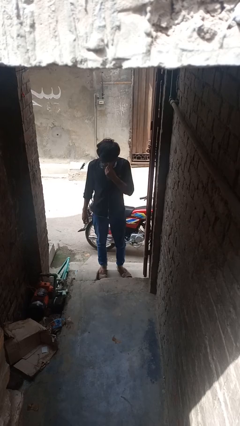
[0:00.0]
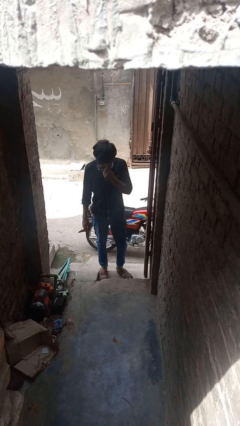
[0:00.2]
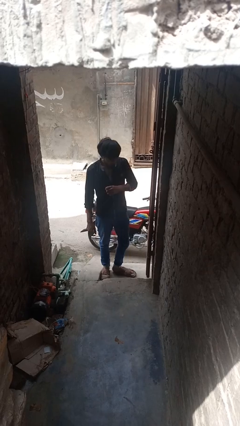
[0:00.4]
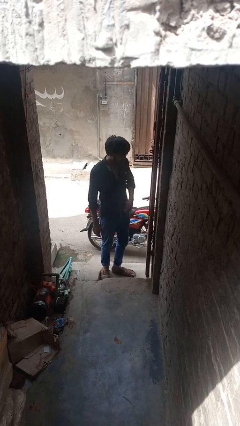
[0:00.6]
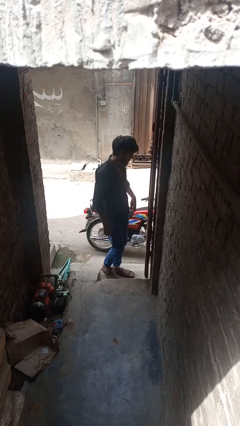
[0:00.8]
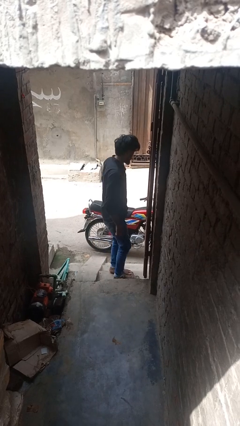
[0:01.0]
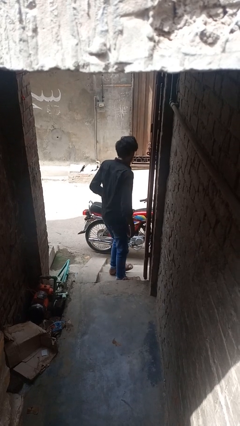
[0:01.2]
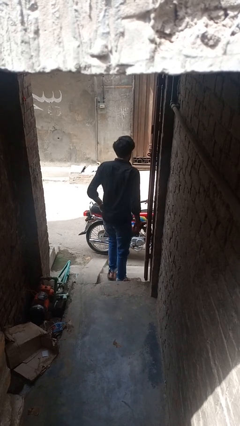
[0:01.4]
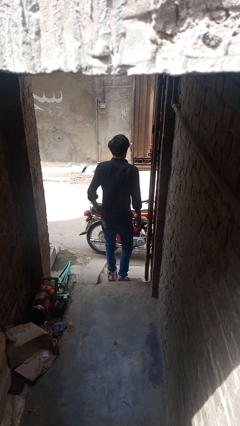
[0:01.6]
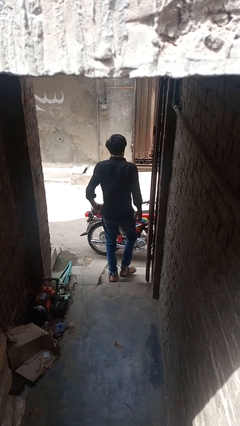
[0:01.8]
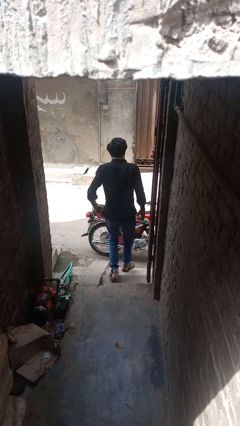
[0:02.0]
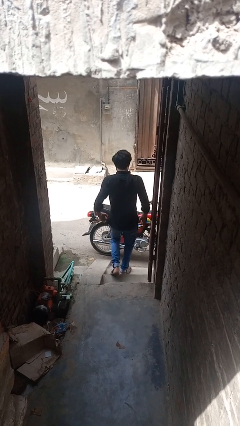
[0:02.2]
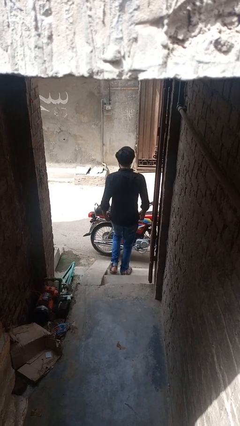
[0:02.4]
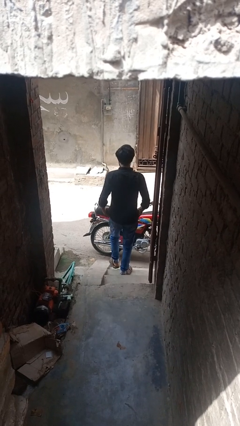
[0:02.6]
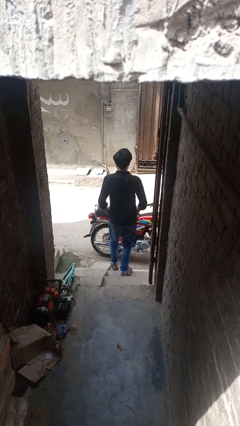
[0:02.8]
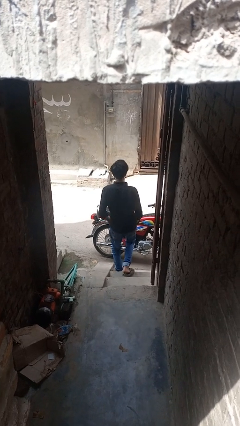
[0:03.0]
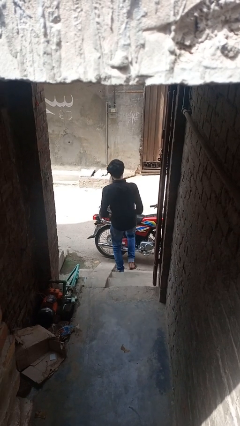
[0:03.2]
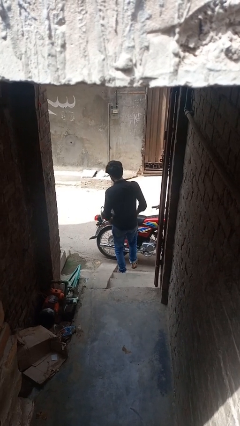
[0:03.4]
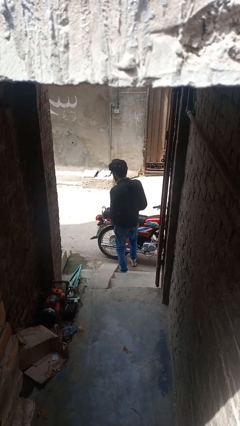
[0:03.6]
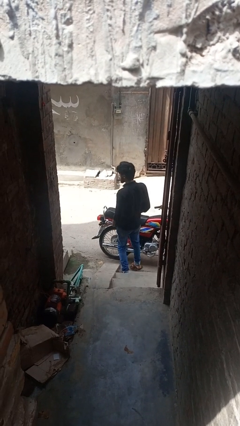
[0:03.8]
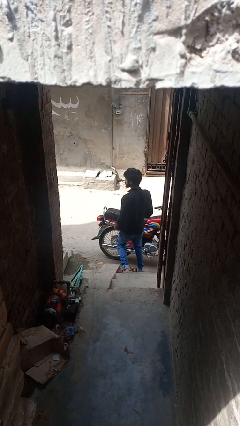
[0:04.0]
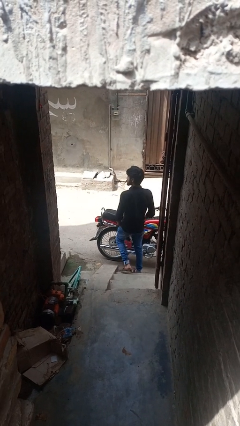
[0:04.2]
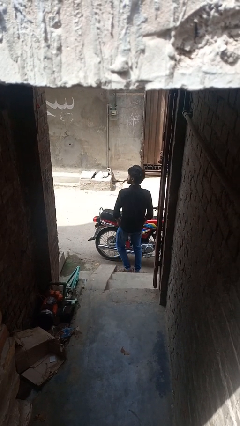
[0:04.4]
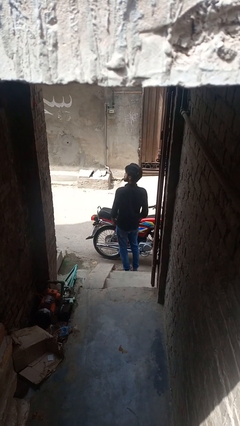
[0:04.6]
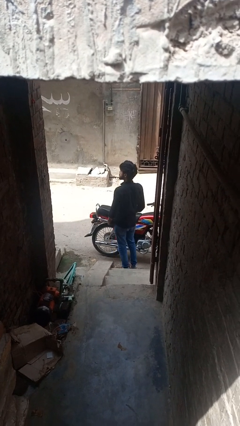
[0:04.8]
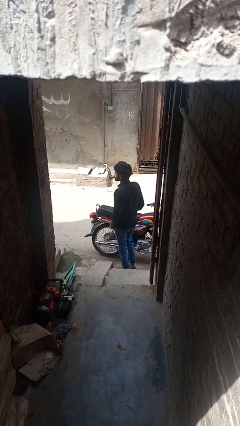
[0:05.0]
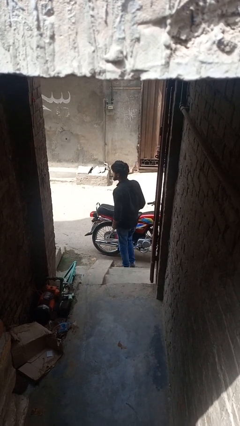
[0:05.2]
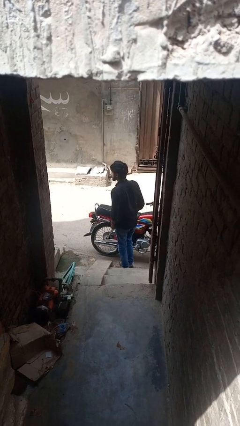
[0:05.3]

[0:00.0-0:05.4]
person climbs down stairs

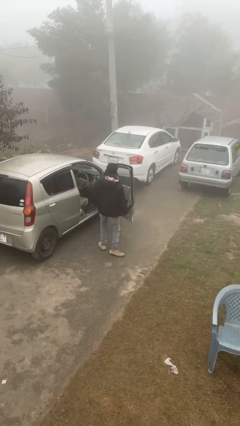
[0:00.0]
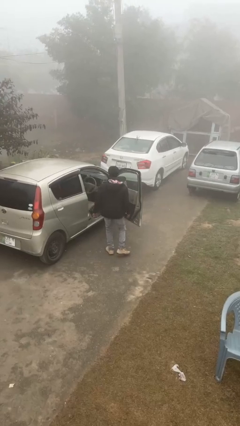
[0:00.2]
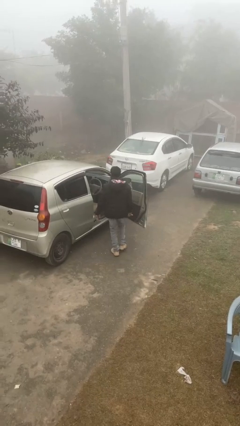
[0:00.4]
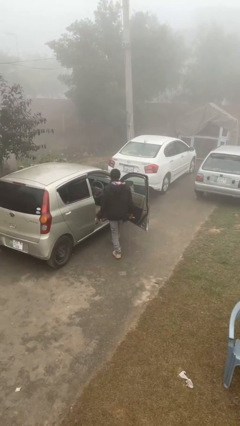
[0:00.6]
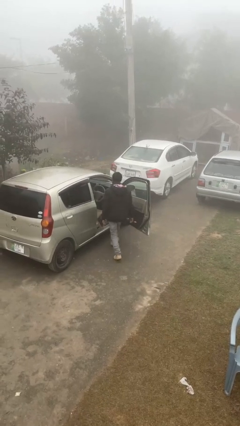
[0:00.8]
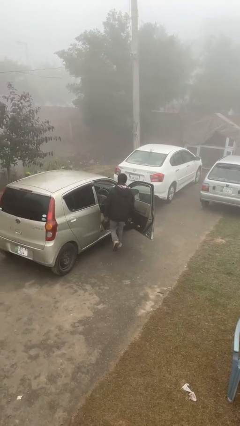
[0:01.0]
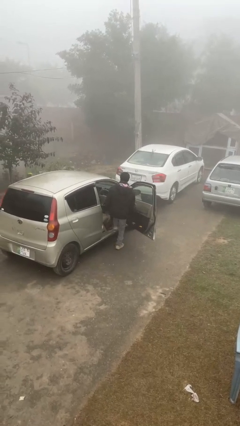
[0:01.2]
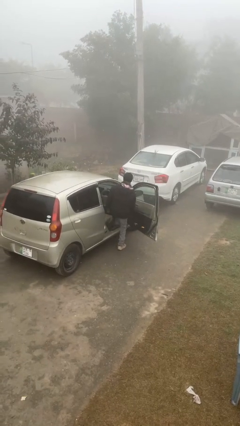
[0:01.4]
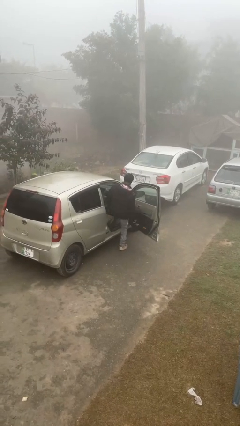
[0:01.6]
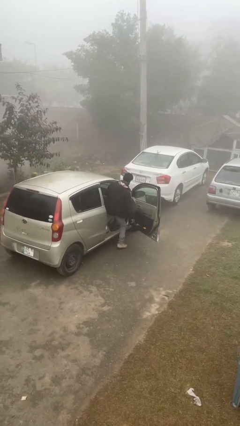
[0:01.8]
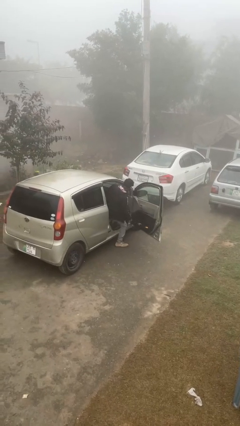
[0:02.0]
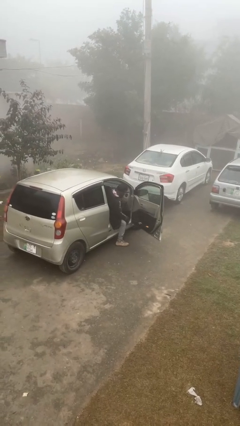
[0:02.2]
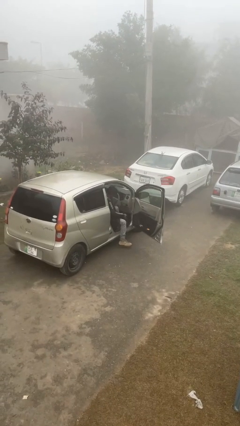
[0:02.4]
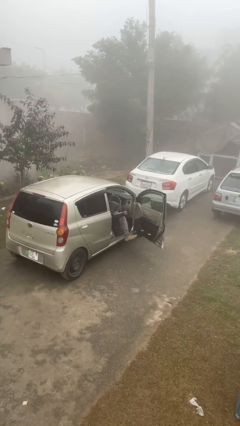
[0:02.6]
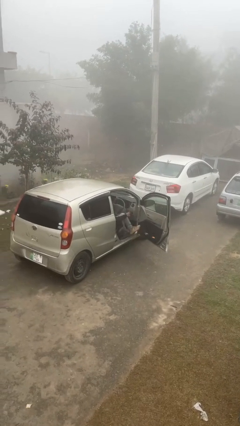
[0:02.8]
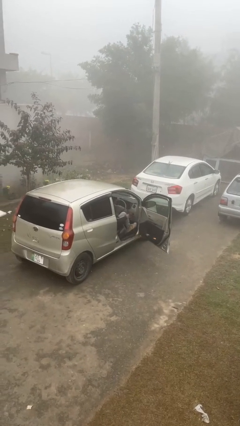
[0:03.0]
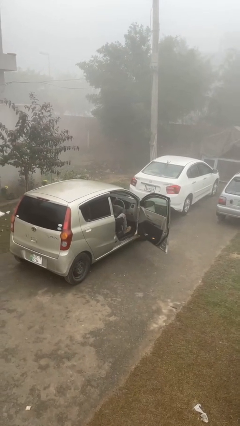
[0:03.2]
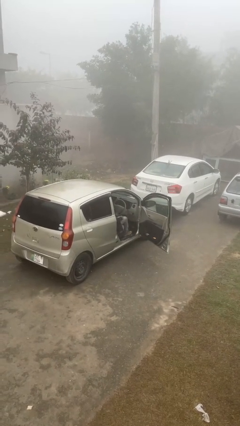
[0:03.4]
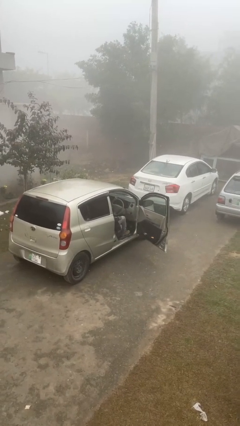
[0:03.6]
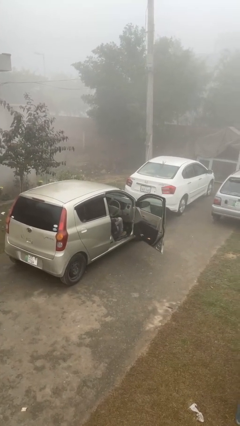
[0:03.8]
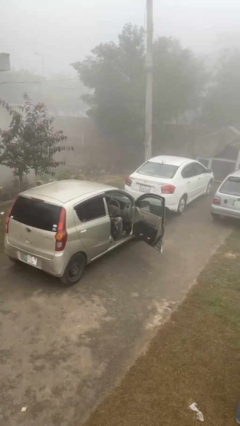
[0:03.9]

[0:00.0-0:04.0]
person enters car

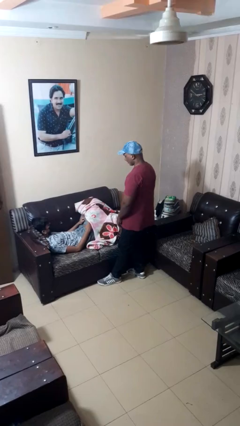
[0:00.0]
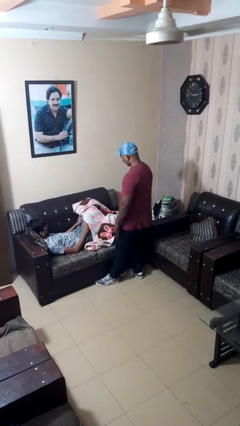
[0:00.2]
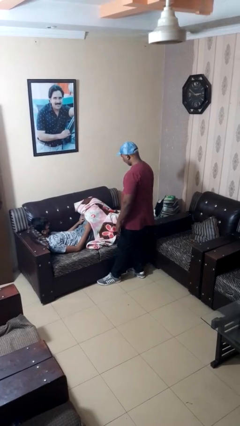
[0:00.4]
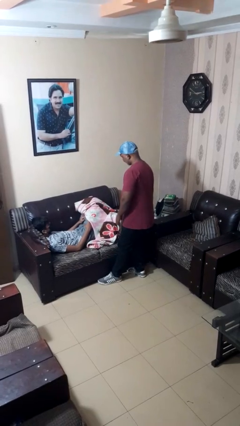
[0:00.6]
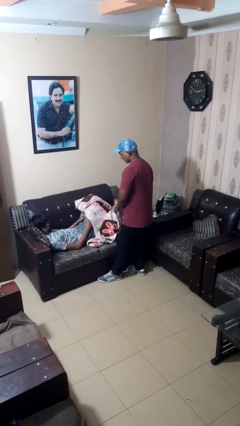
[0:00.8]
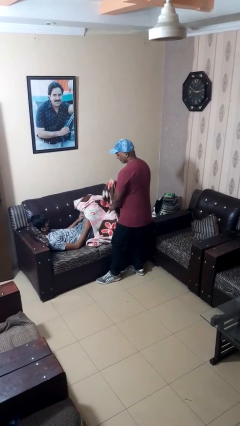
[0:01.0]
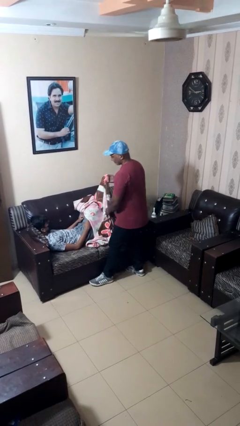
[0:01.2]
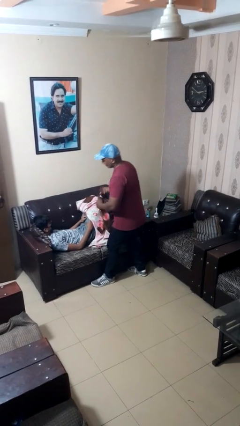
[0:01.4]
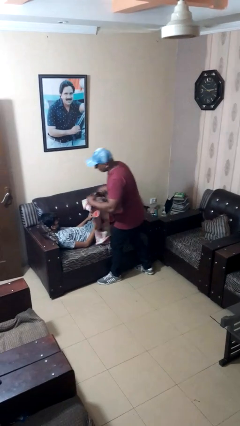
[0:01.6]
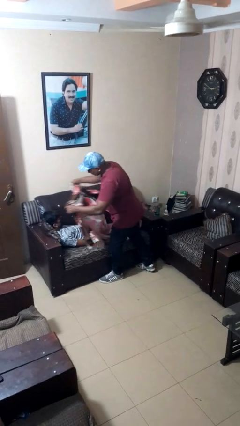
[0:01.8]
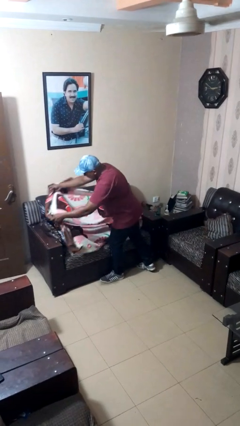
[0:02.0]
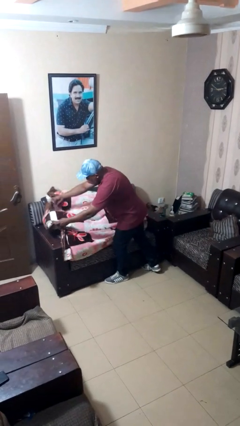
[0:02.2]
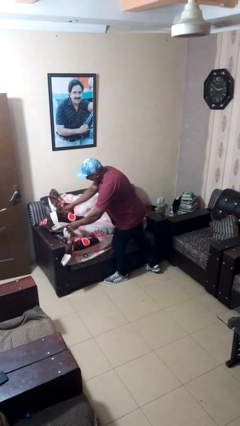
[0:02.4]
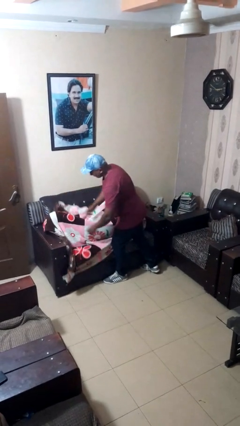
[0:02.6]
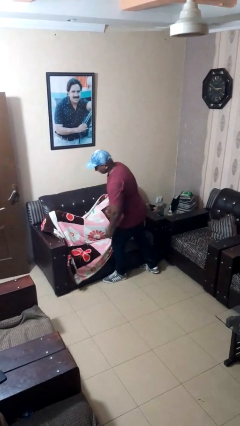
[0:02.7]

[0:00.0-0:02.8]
person covers friend with blanket

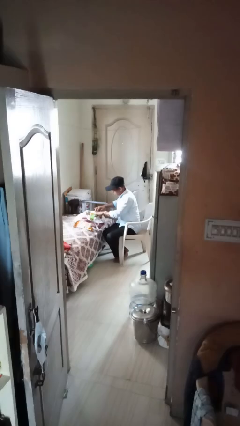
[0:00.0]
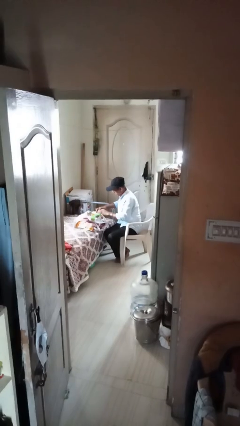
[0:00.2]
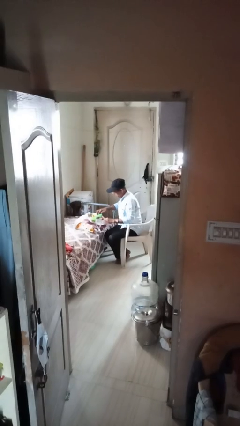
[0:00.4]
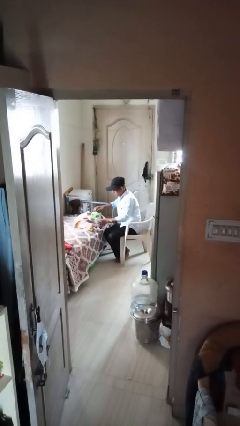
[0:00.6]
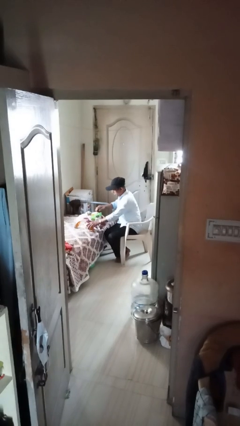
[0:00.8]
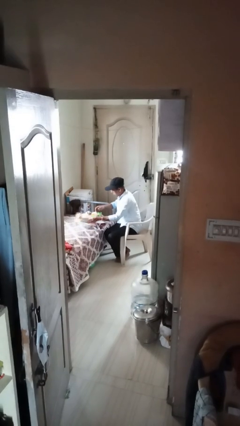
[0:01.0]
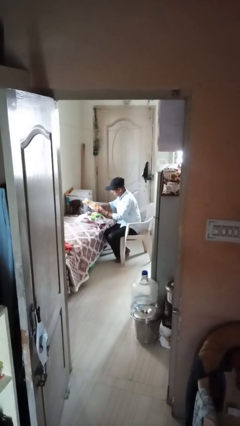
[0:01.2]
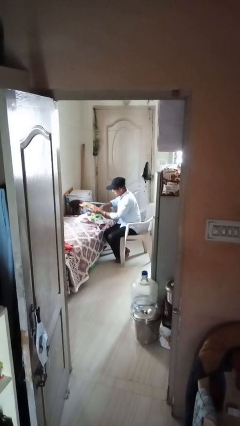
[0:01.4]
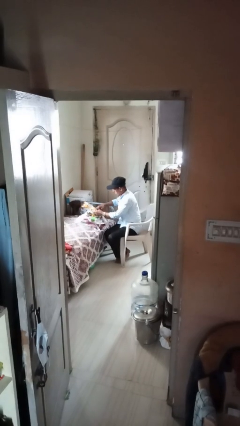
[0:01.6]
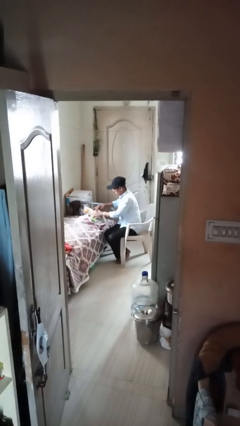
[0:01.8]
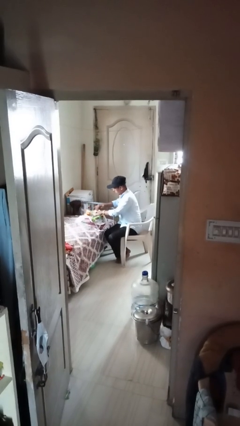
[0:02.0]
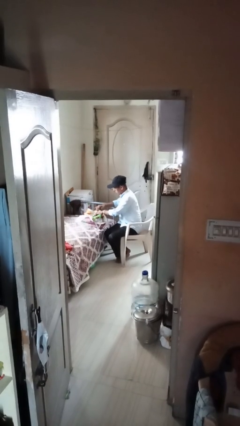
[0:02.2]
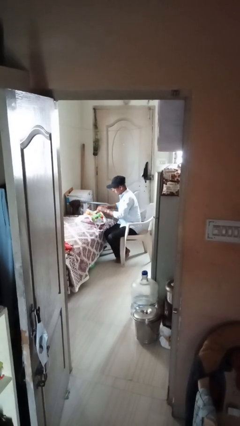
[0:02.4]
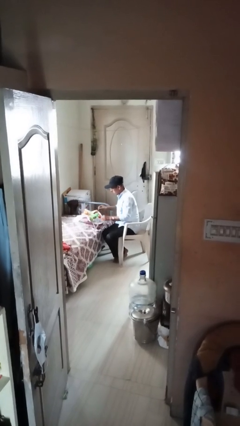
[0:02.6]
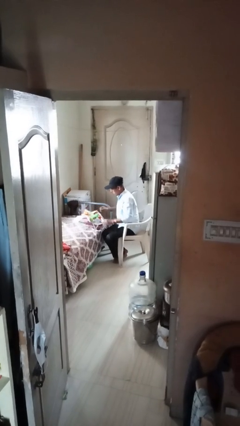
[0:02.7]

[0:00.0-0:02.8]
person puts object into bag

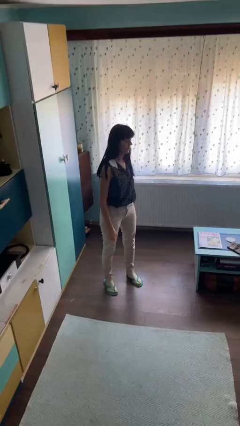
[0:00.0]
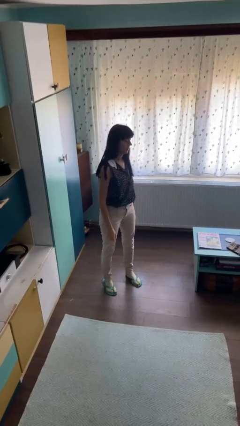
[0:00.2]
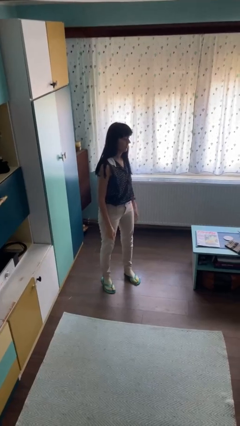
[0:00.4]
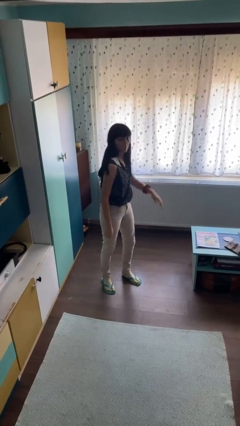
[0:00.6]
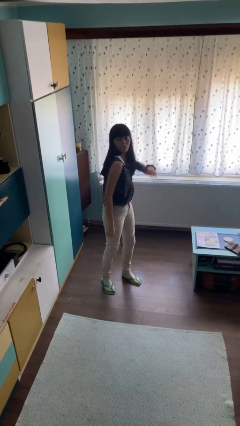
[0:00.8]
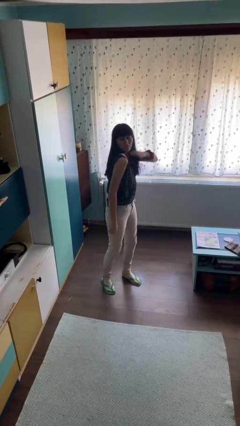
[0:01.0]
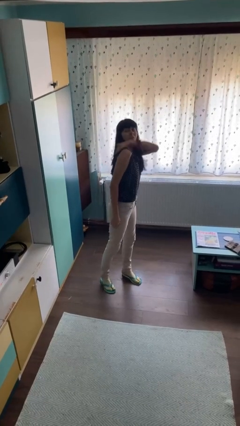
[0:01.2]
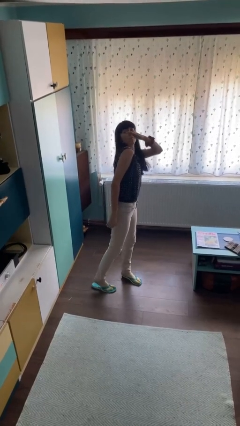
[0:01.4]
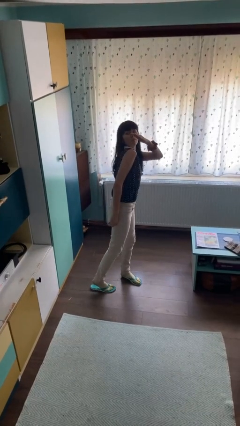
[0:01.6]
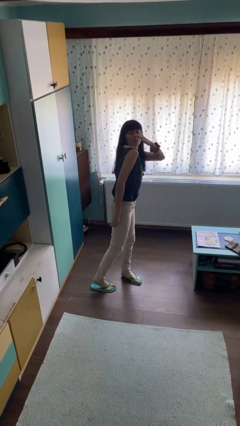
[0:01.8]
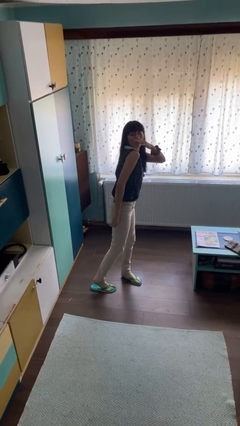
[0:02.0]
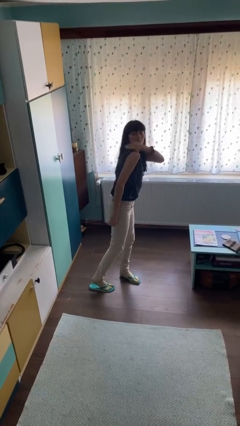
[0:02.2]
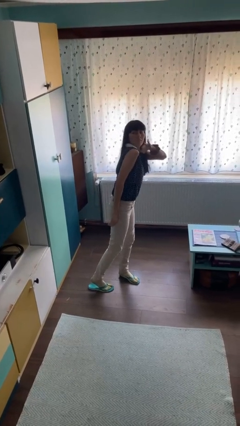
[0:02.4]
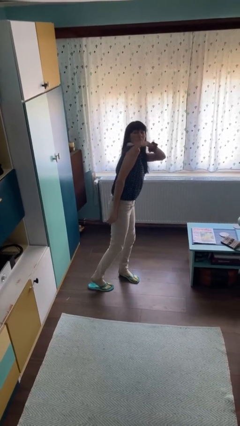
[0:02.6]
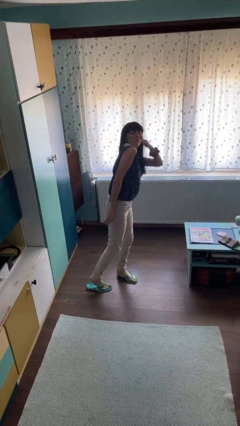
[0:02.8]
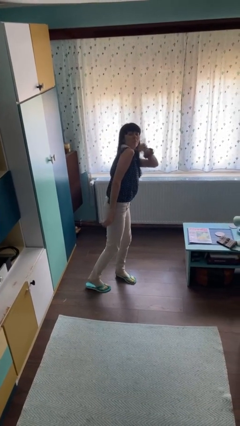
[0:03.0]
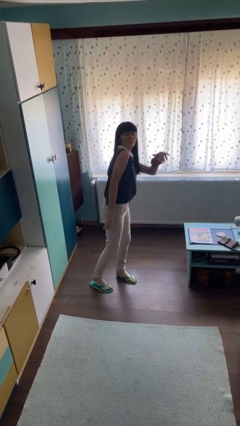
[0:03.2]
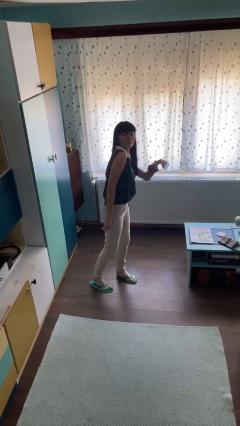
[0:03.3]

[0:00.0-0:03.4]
person swats bug
